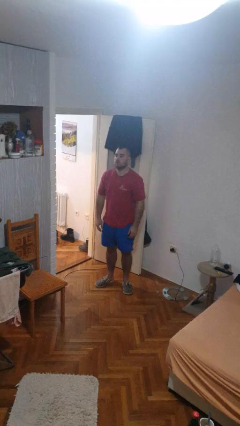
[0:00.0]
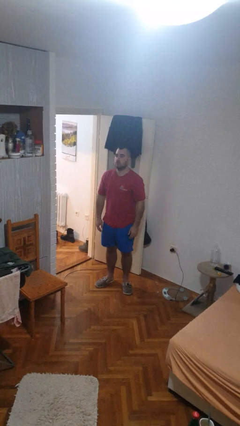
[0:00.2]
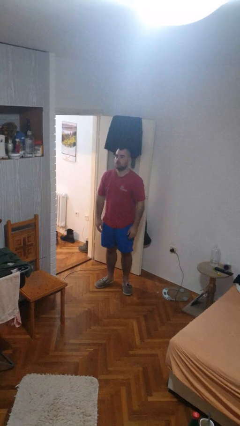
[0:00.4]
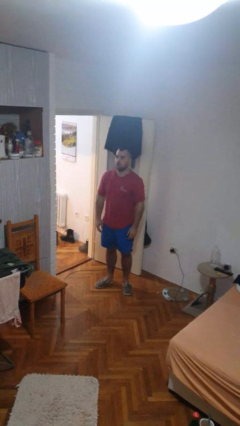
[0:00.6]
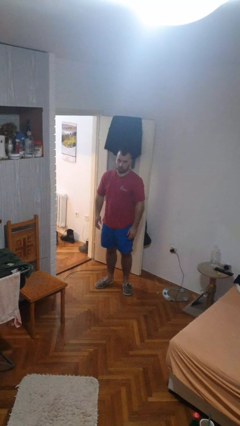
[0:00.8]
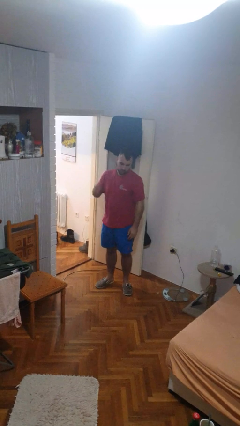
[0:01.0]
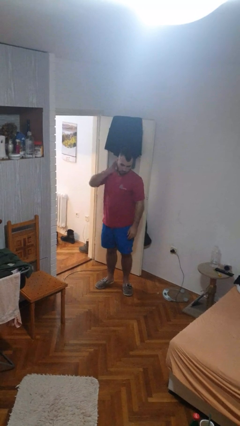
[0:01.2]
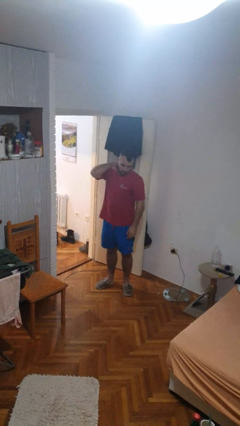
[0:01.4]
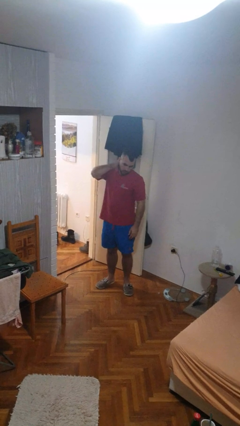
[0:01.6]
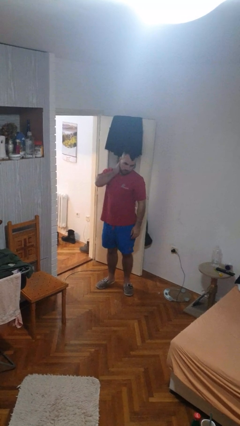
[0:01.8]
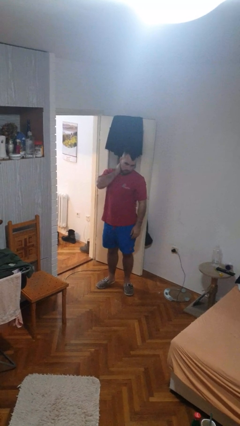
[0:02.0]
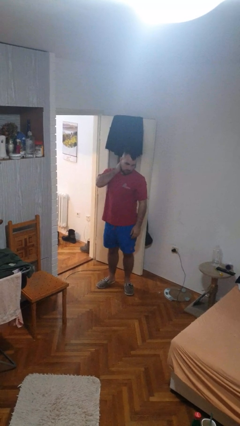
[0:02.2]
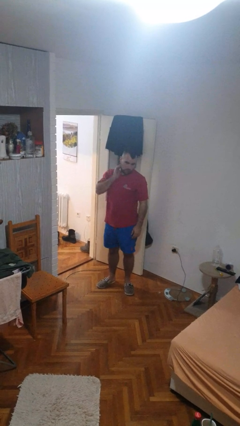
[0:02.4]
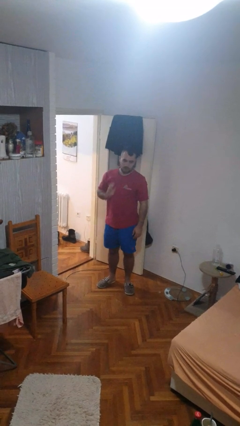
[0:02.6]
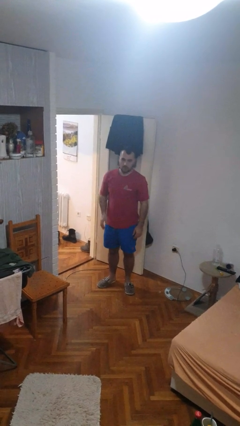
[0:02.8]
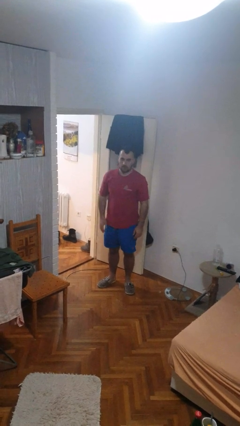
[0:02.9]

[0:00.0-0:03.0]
person rubs neck

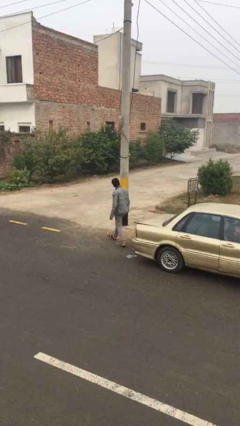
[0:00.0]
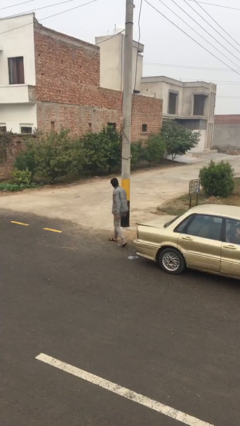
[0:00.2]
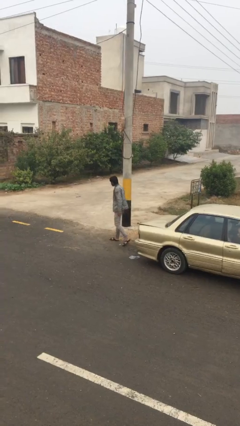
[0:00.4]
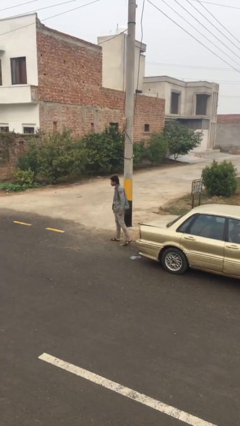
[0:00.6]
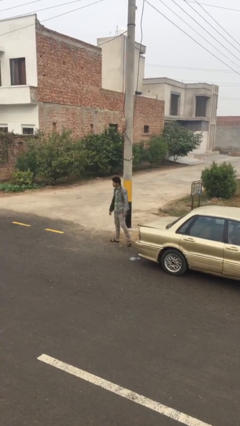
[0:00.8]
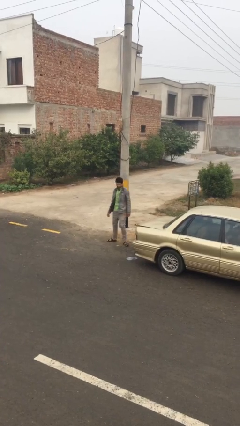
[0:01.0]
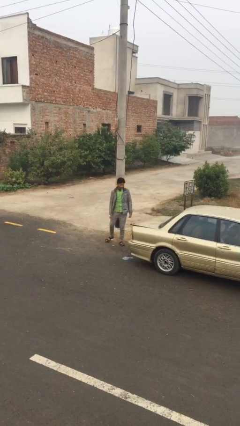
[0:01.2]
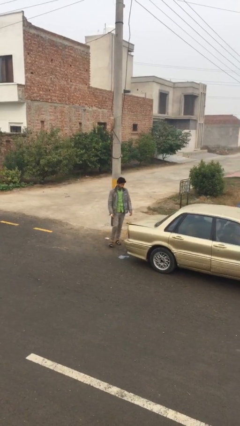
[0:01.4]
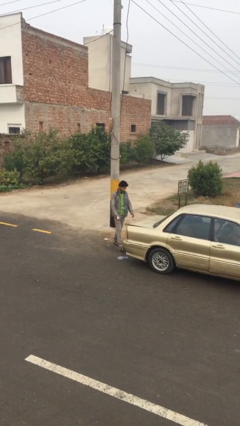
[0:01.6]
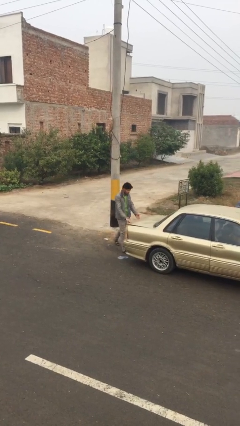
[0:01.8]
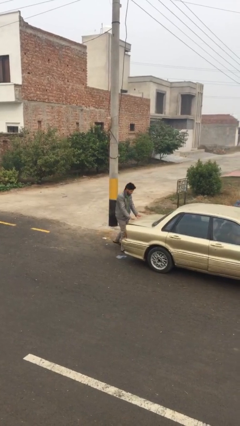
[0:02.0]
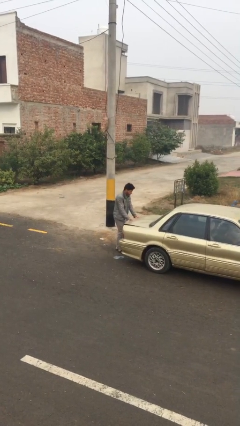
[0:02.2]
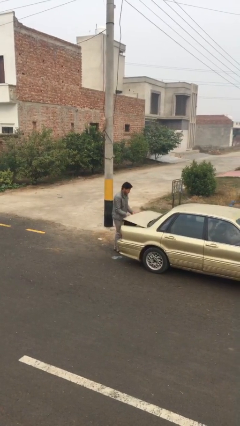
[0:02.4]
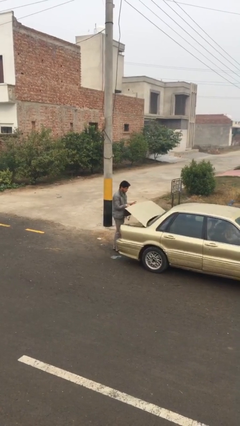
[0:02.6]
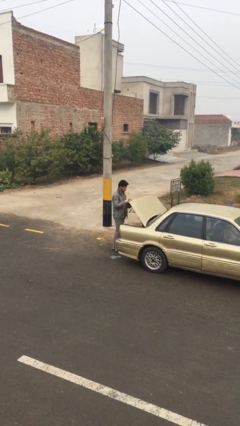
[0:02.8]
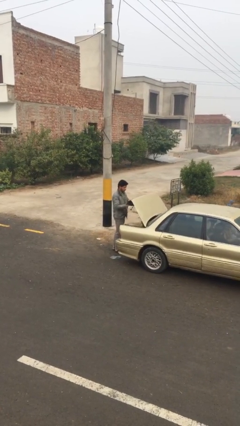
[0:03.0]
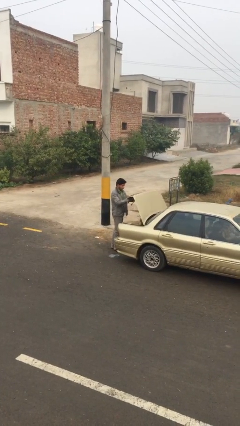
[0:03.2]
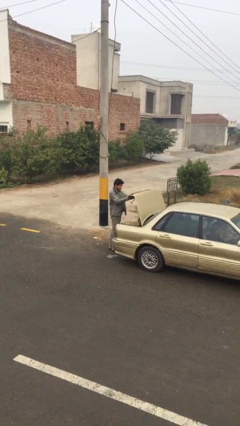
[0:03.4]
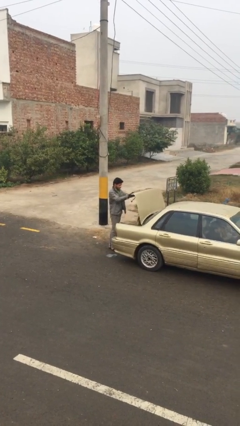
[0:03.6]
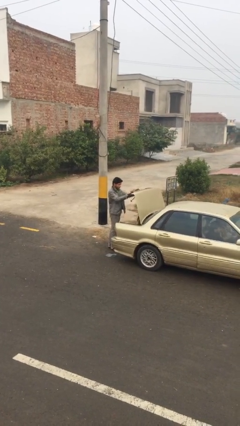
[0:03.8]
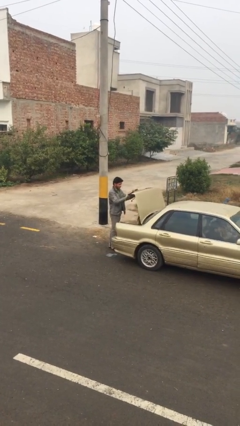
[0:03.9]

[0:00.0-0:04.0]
person opens car trunk

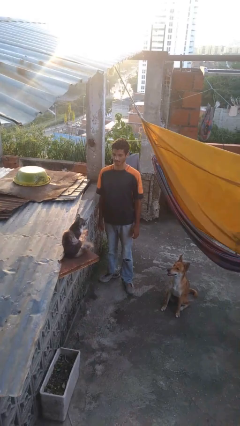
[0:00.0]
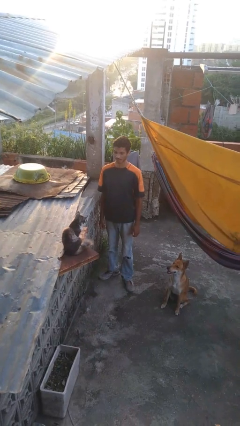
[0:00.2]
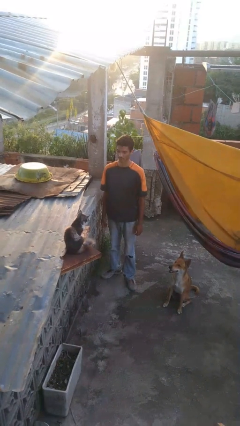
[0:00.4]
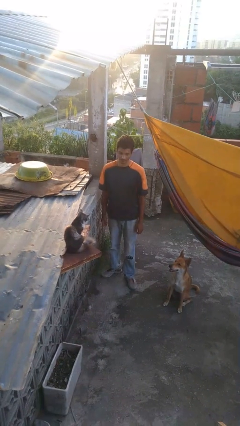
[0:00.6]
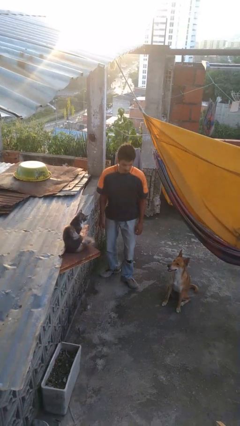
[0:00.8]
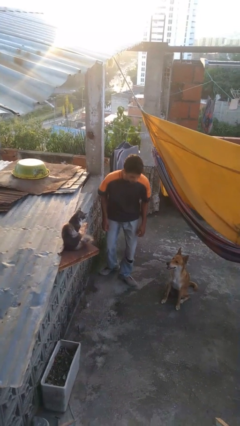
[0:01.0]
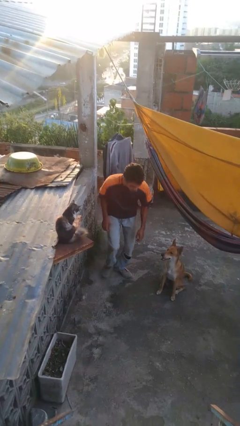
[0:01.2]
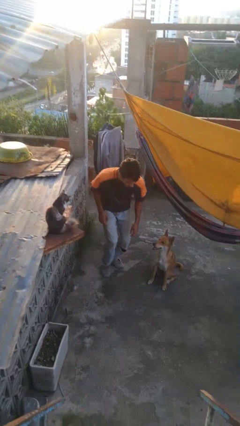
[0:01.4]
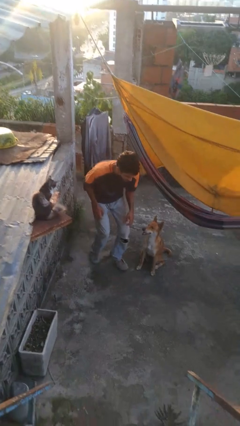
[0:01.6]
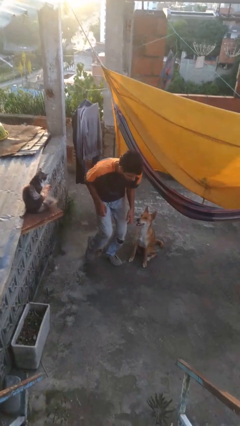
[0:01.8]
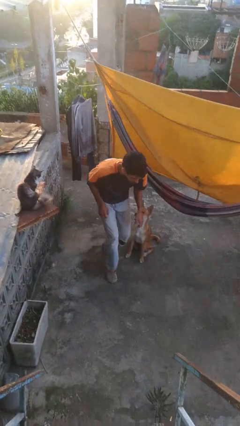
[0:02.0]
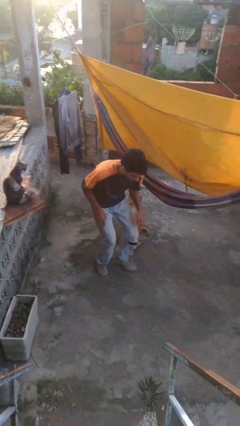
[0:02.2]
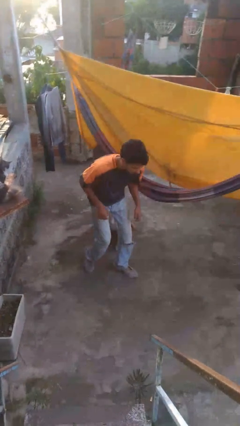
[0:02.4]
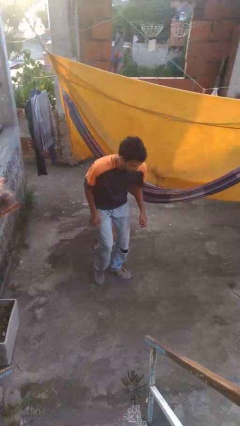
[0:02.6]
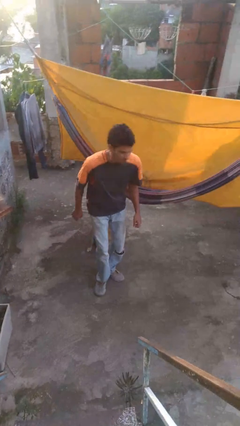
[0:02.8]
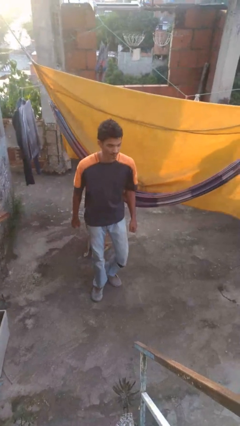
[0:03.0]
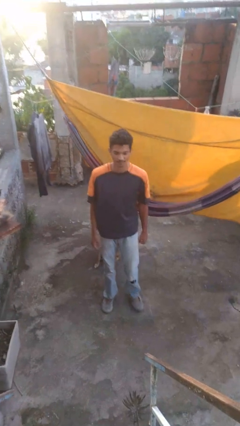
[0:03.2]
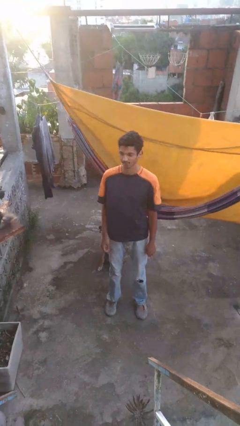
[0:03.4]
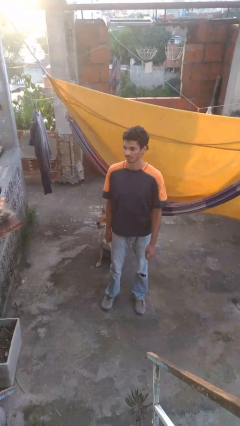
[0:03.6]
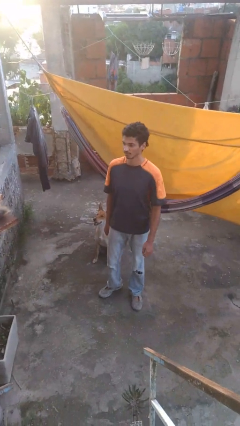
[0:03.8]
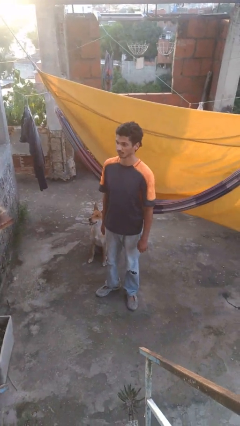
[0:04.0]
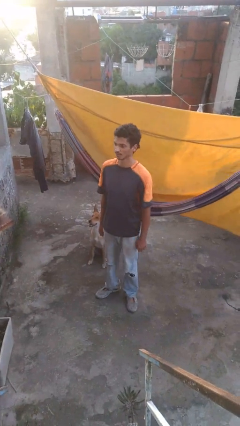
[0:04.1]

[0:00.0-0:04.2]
person walks tiptoe

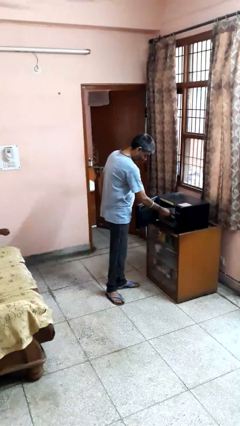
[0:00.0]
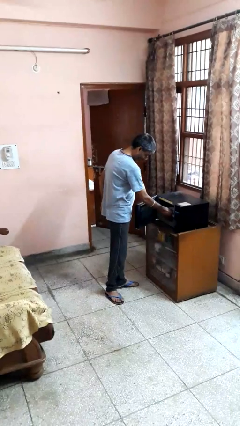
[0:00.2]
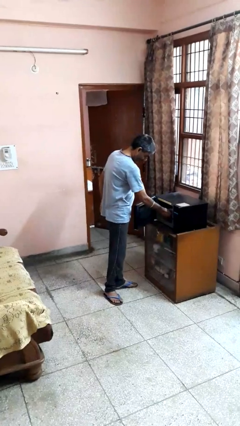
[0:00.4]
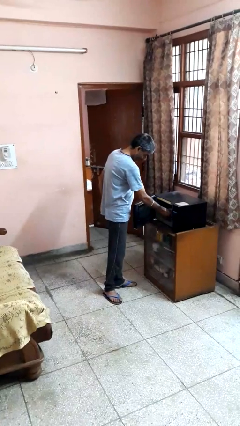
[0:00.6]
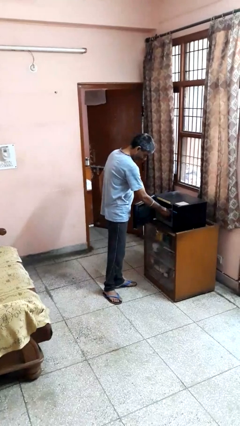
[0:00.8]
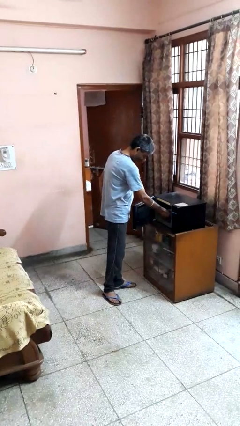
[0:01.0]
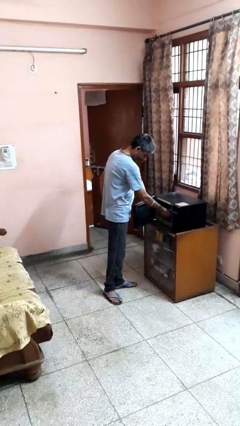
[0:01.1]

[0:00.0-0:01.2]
person puts object into microwave

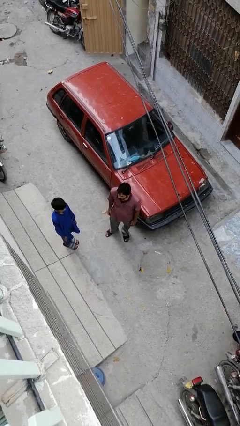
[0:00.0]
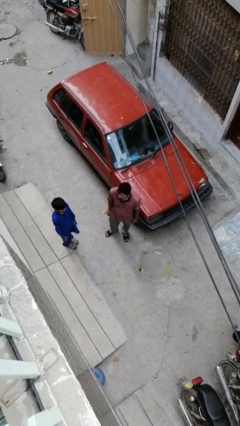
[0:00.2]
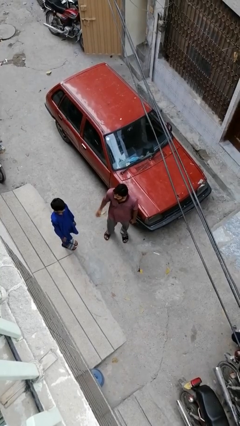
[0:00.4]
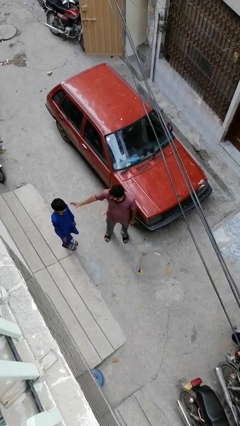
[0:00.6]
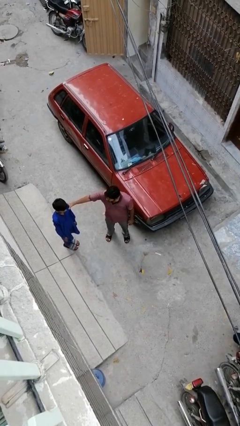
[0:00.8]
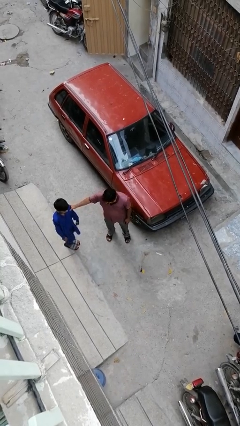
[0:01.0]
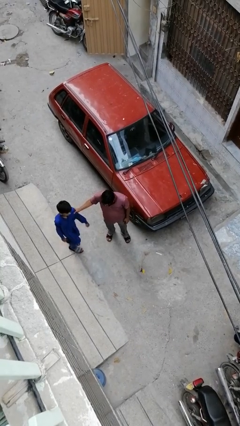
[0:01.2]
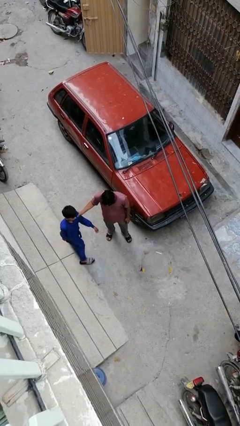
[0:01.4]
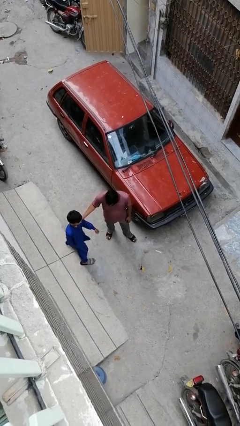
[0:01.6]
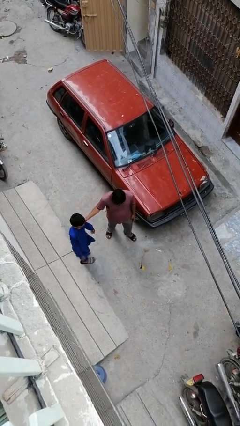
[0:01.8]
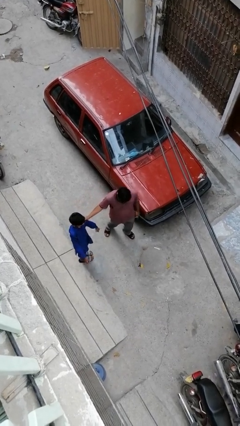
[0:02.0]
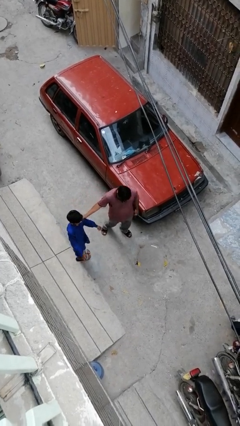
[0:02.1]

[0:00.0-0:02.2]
person grabs person by bicep

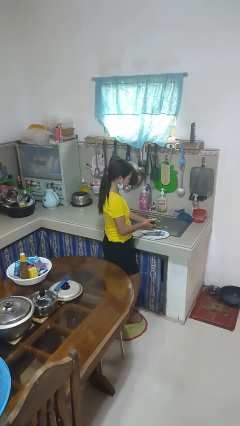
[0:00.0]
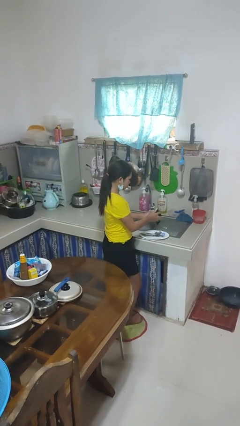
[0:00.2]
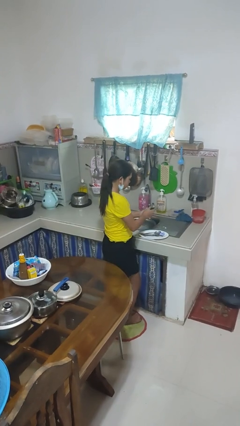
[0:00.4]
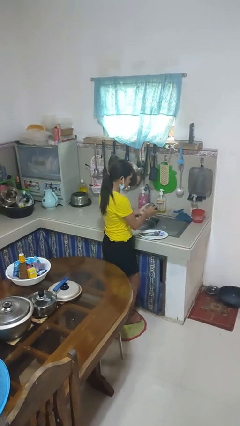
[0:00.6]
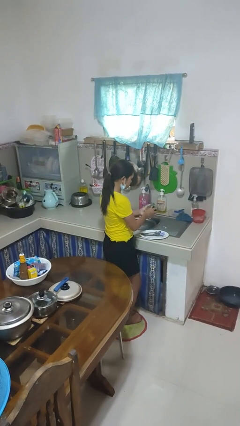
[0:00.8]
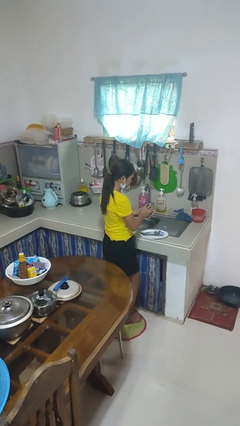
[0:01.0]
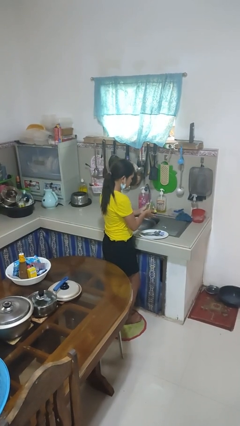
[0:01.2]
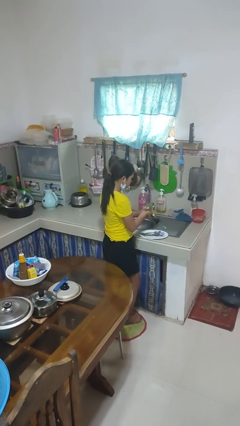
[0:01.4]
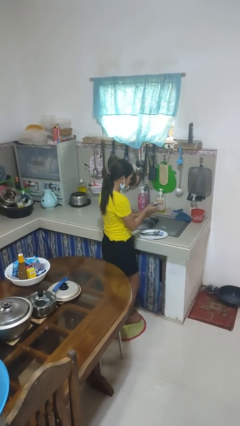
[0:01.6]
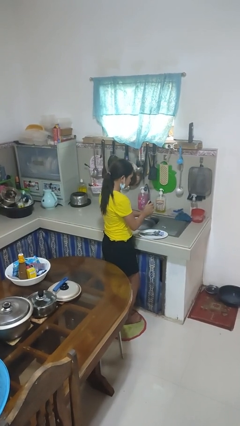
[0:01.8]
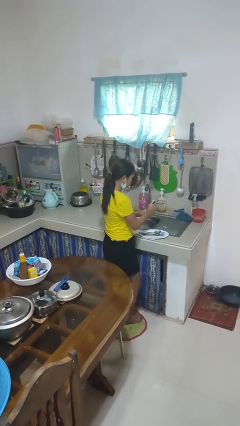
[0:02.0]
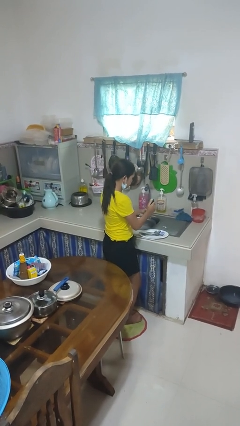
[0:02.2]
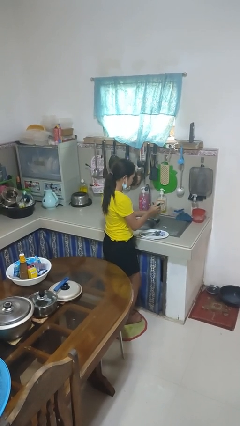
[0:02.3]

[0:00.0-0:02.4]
person washes dish
